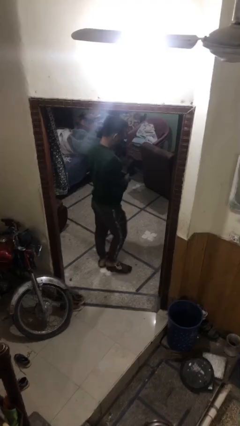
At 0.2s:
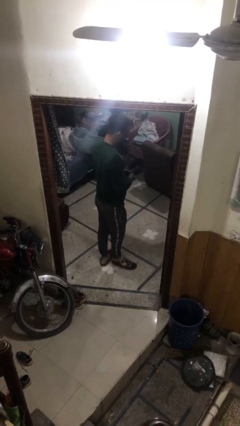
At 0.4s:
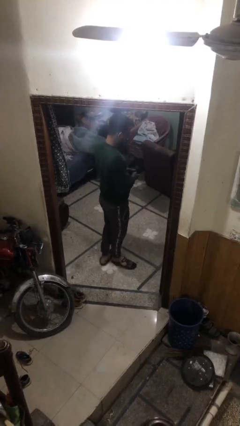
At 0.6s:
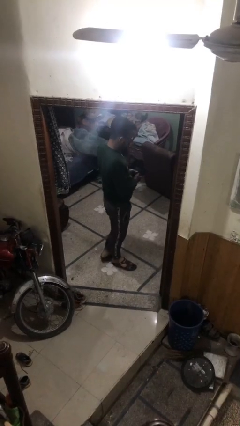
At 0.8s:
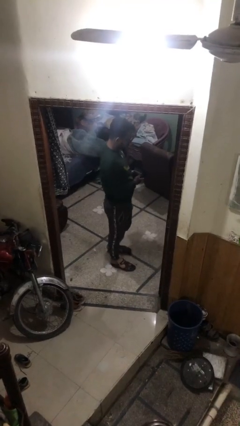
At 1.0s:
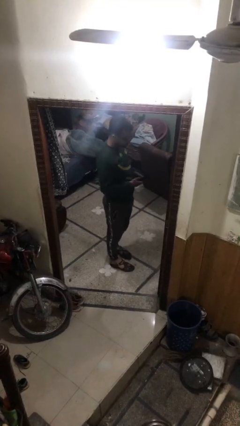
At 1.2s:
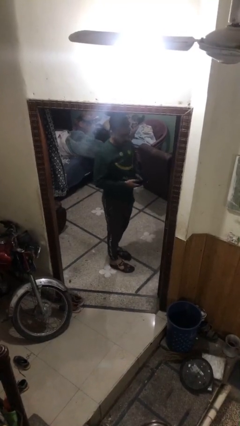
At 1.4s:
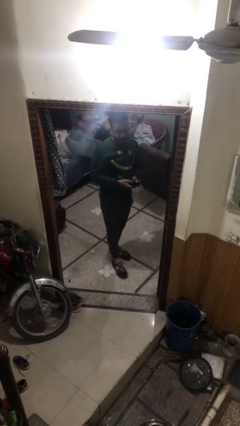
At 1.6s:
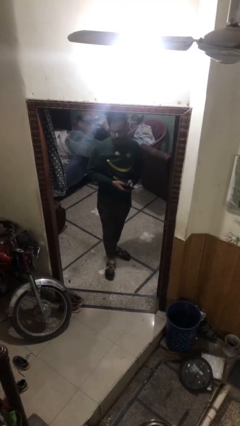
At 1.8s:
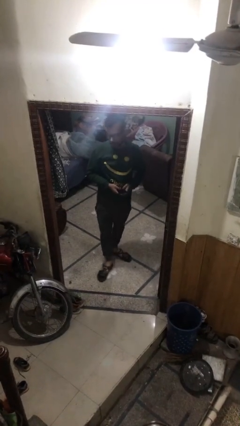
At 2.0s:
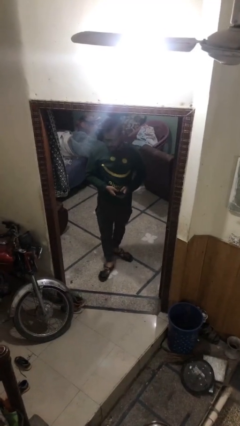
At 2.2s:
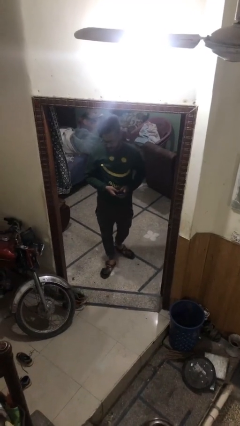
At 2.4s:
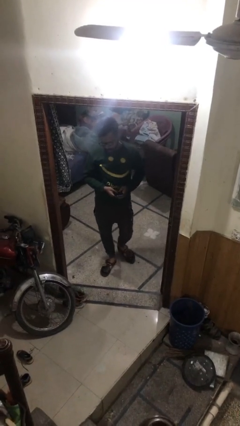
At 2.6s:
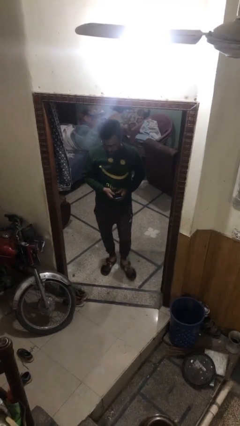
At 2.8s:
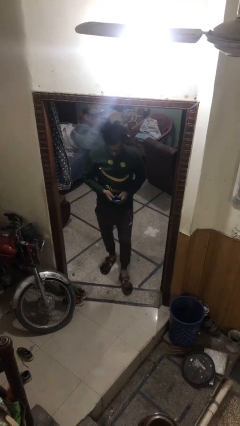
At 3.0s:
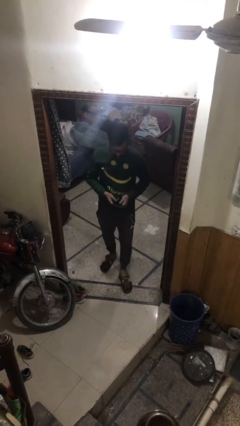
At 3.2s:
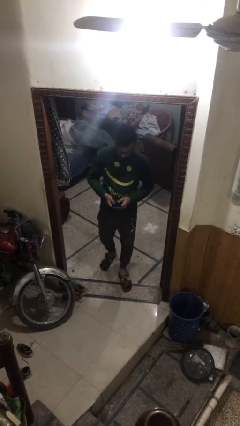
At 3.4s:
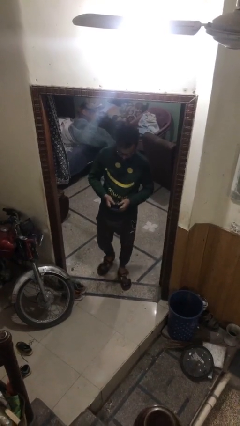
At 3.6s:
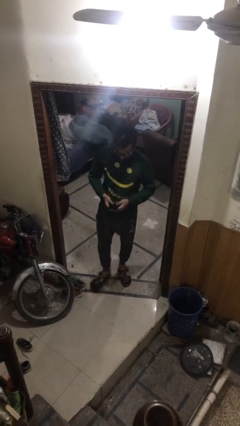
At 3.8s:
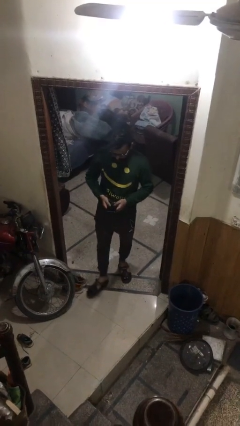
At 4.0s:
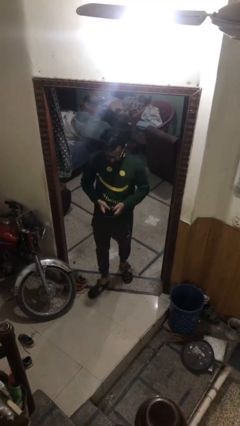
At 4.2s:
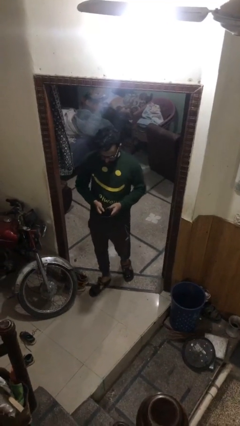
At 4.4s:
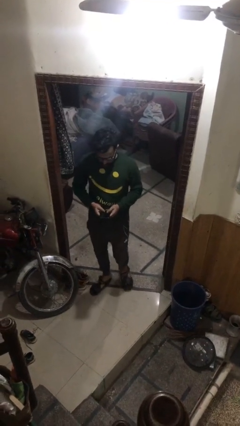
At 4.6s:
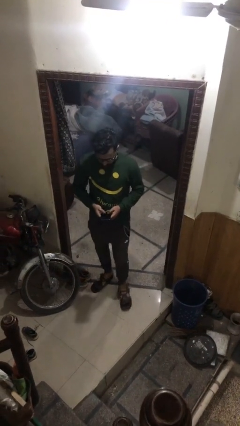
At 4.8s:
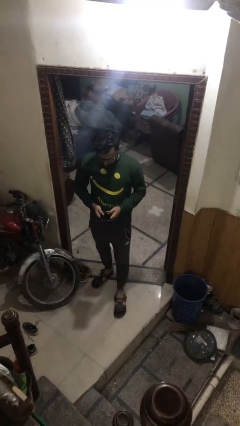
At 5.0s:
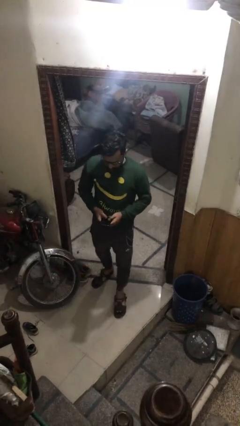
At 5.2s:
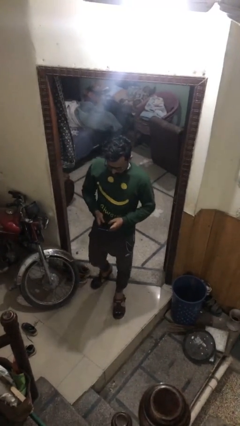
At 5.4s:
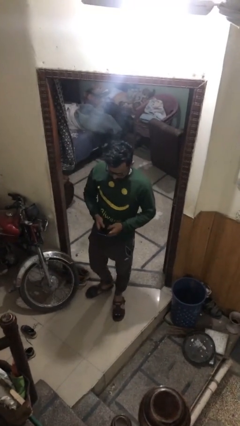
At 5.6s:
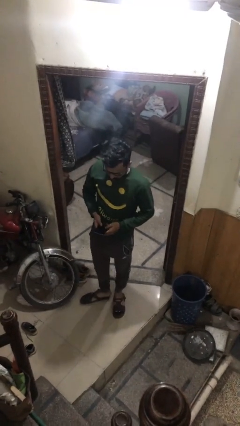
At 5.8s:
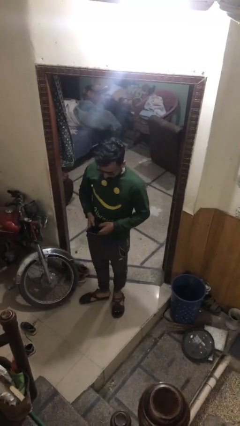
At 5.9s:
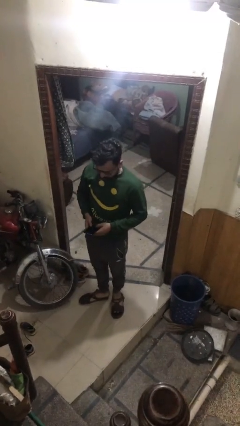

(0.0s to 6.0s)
person enters scene through structure

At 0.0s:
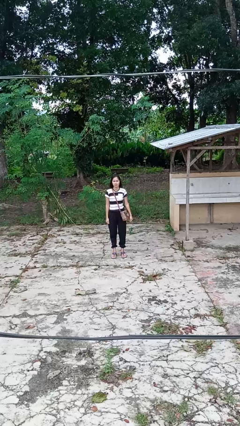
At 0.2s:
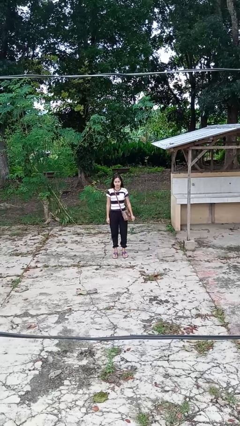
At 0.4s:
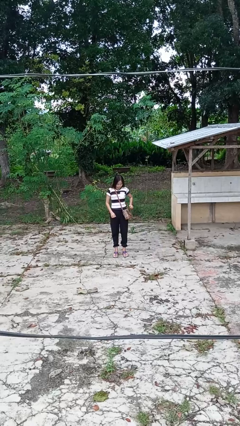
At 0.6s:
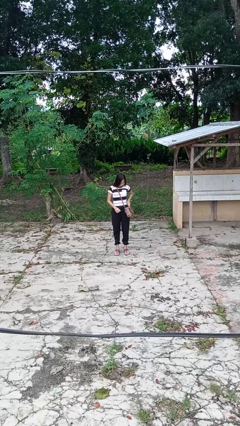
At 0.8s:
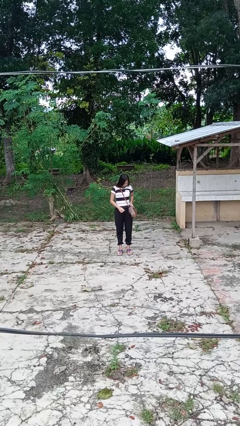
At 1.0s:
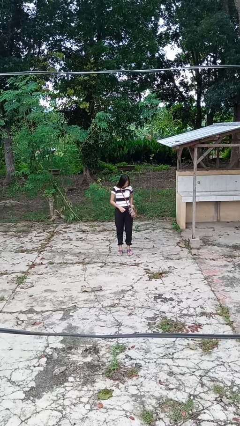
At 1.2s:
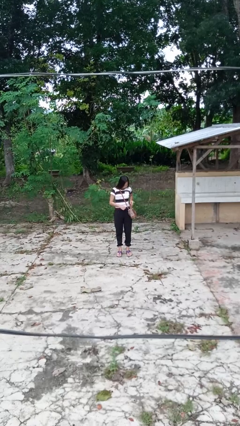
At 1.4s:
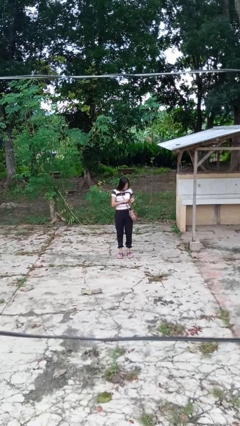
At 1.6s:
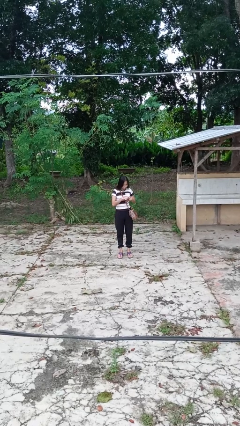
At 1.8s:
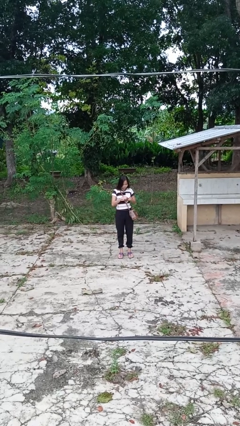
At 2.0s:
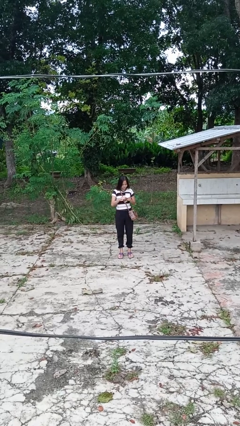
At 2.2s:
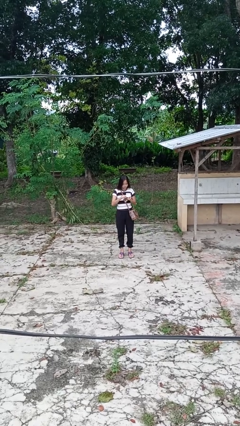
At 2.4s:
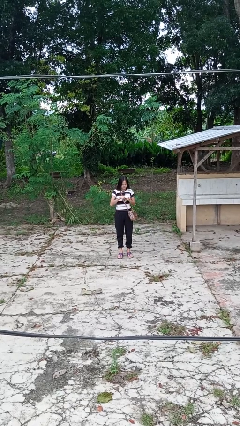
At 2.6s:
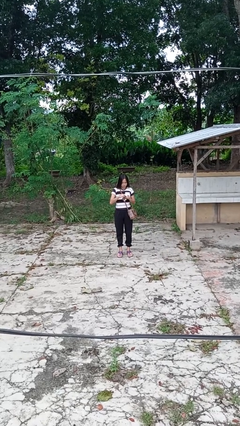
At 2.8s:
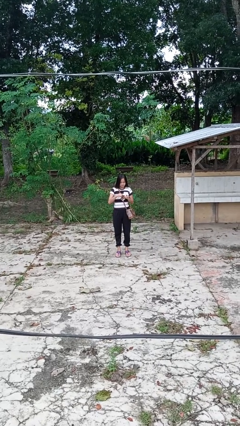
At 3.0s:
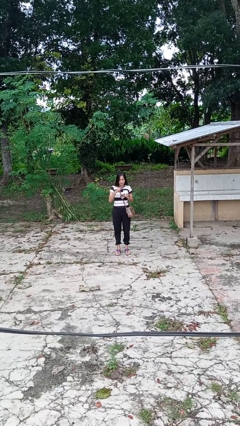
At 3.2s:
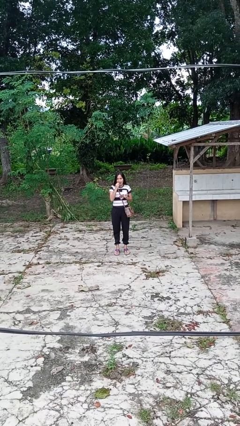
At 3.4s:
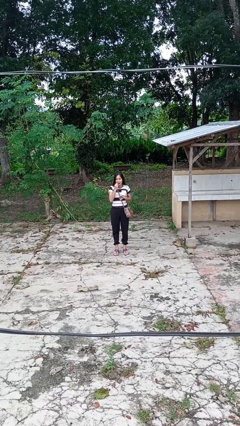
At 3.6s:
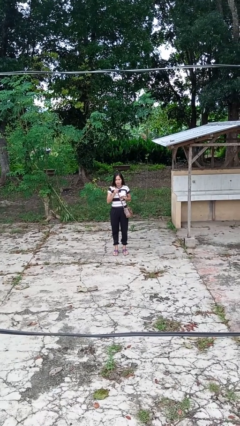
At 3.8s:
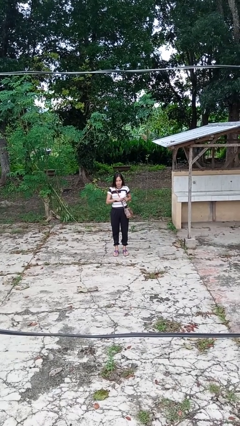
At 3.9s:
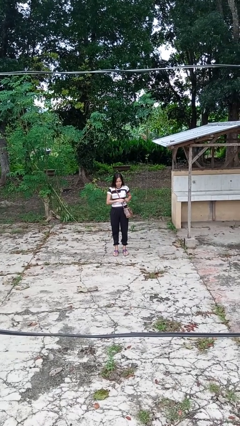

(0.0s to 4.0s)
person eats snack from bag

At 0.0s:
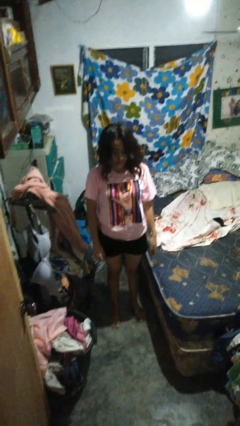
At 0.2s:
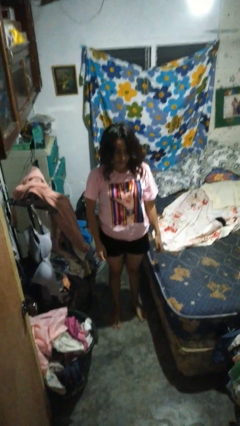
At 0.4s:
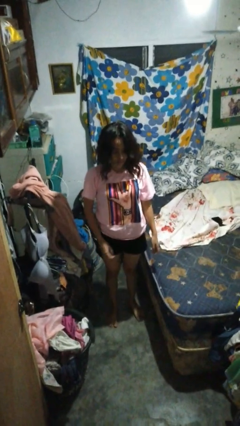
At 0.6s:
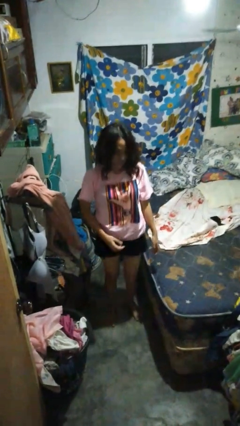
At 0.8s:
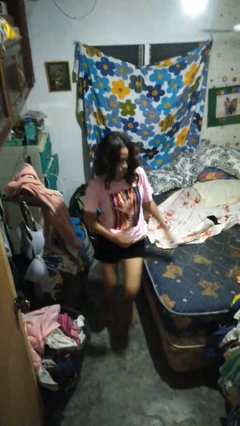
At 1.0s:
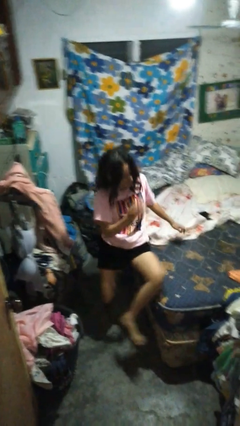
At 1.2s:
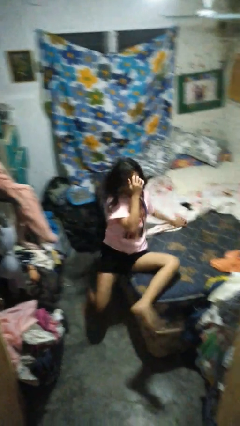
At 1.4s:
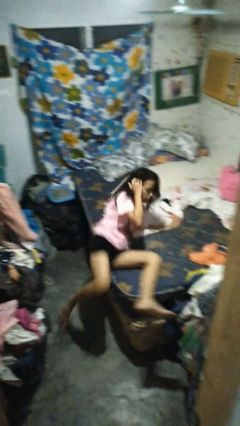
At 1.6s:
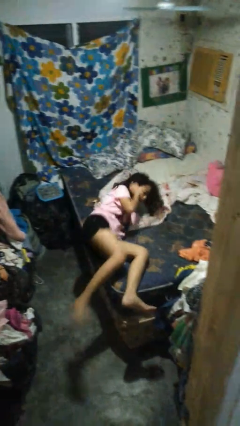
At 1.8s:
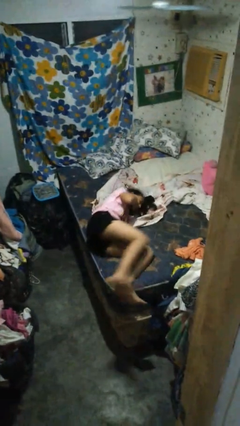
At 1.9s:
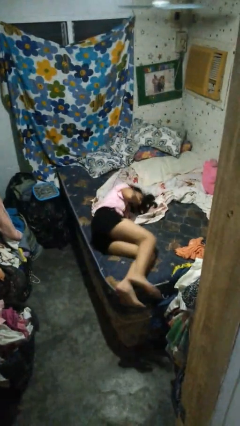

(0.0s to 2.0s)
person lies down on bed

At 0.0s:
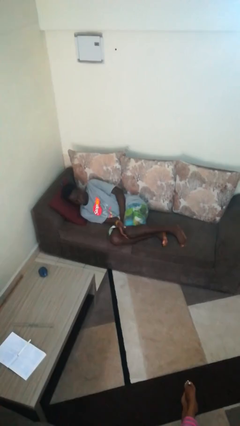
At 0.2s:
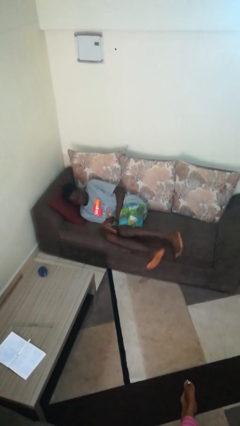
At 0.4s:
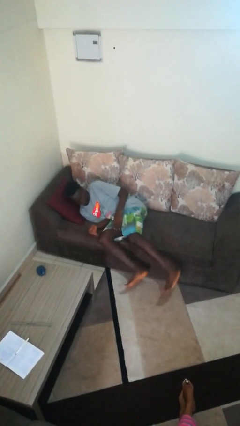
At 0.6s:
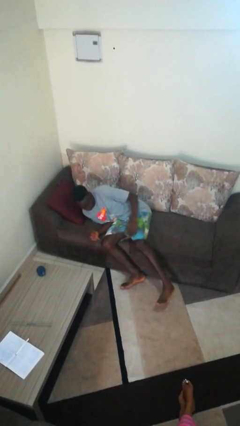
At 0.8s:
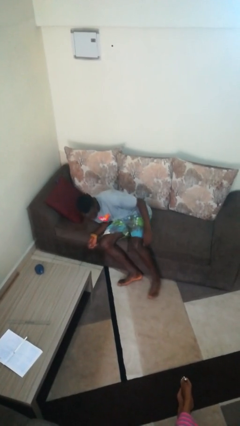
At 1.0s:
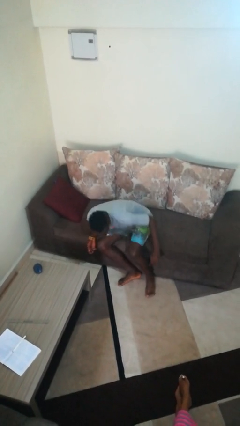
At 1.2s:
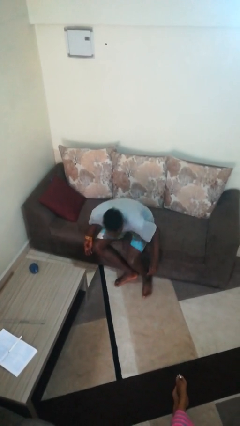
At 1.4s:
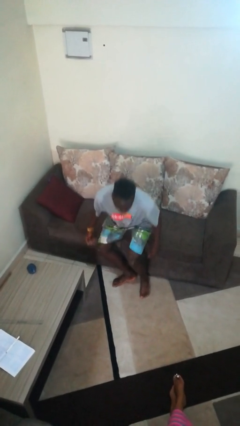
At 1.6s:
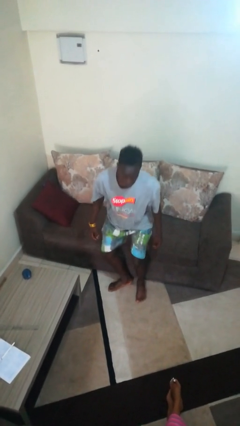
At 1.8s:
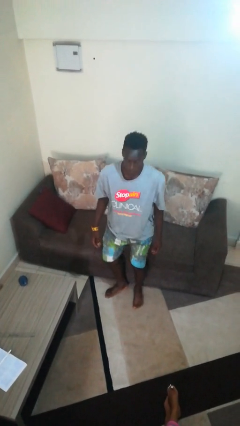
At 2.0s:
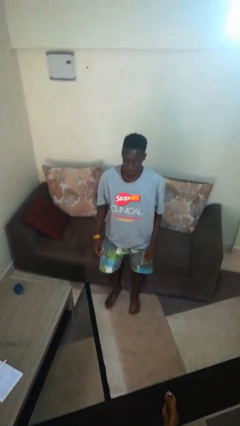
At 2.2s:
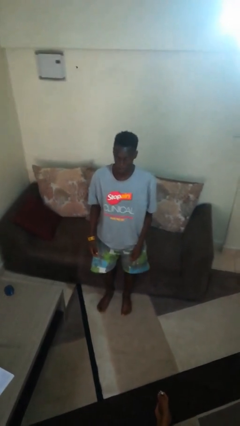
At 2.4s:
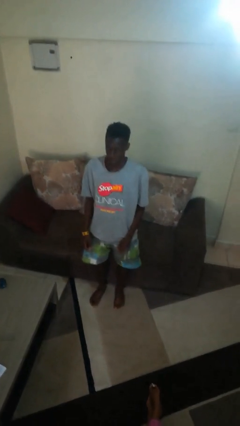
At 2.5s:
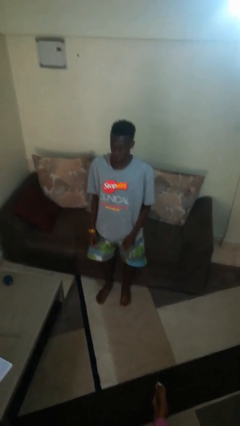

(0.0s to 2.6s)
person stands up

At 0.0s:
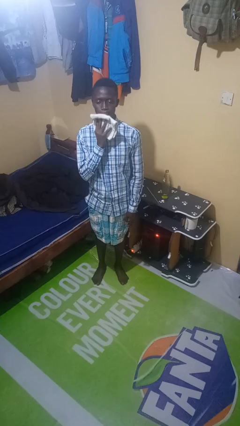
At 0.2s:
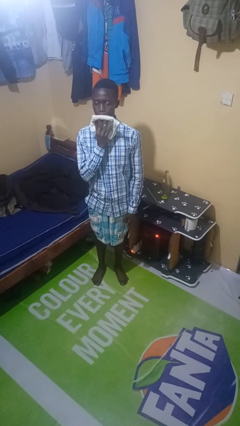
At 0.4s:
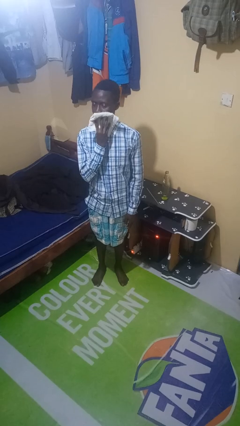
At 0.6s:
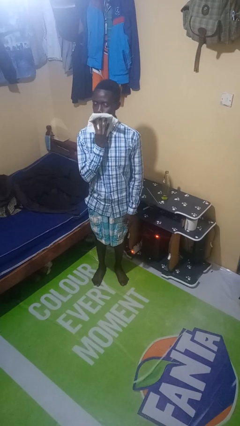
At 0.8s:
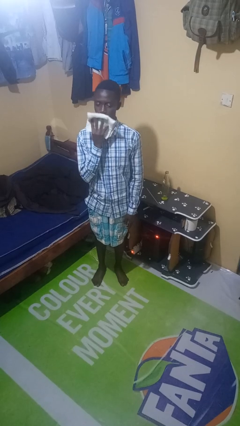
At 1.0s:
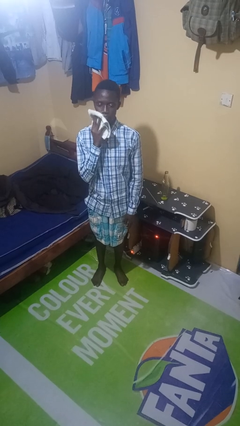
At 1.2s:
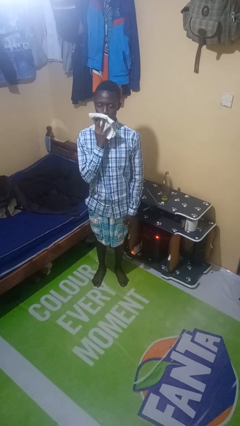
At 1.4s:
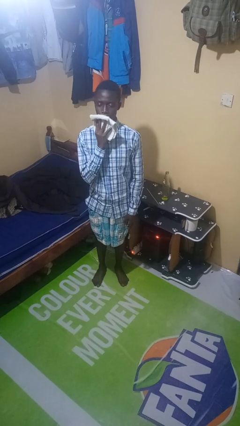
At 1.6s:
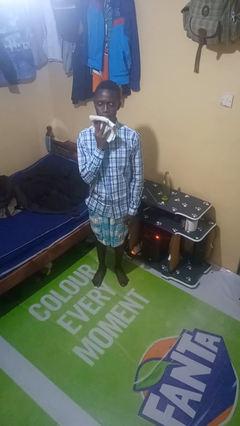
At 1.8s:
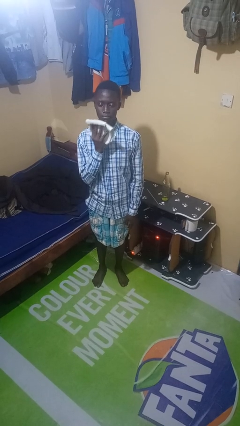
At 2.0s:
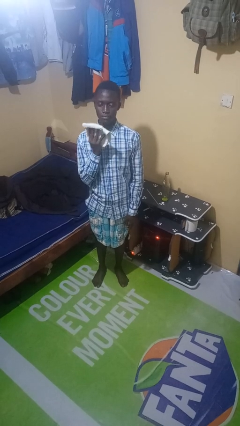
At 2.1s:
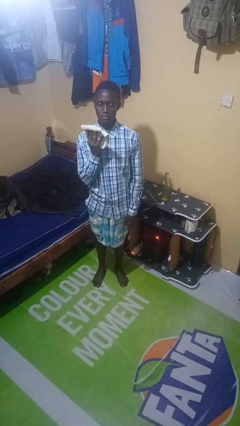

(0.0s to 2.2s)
person wipes mouth with napkin

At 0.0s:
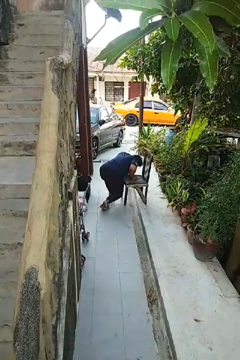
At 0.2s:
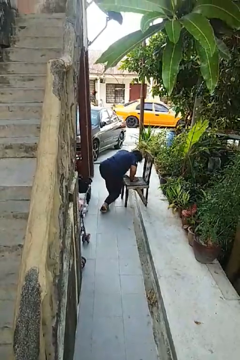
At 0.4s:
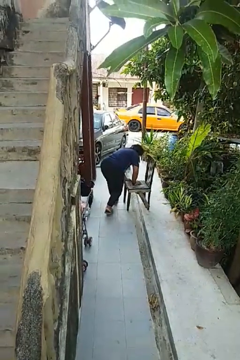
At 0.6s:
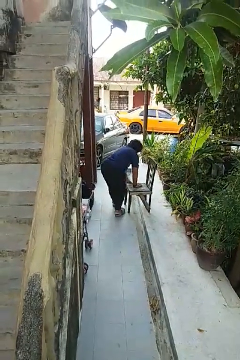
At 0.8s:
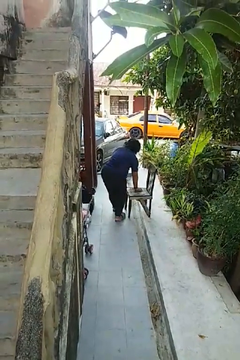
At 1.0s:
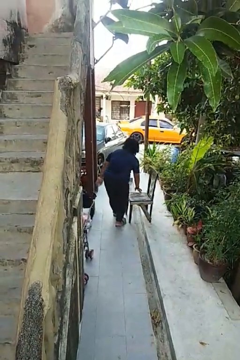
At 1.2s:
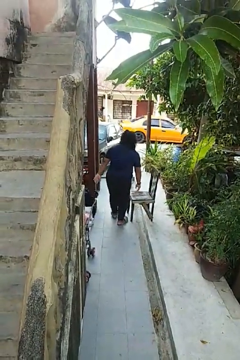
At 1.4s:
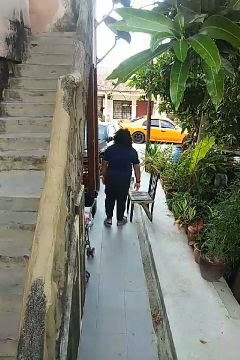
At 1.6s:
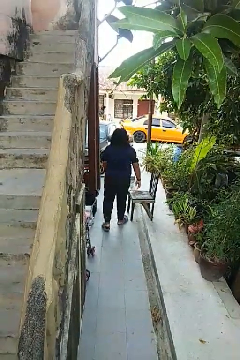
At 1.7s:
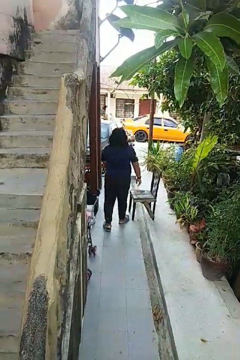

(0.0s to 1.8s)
person stands up from floor
